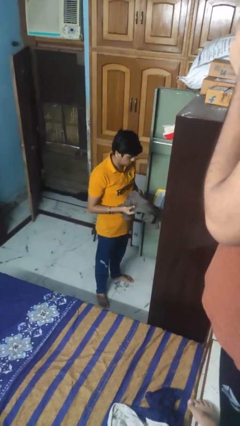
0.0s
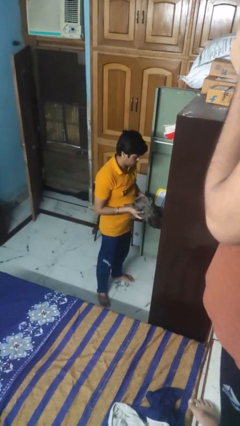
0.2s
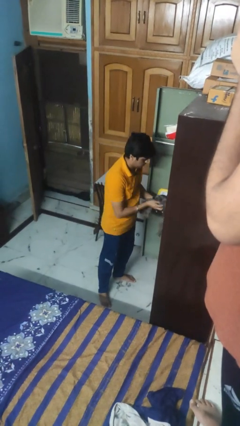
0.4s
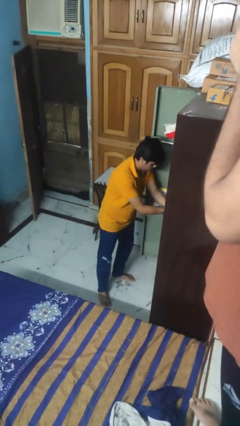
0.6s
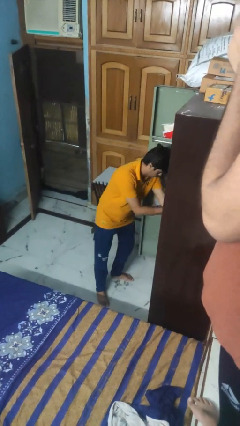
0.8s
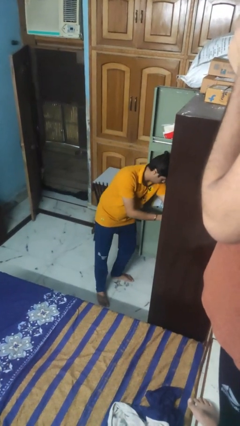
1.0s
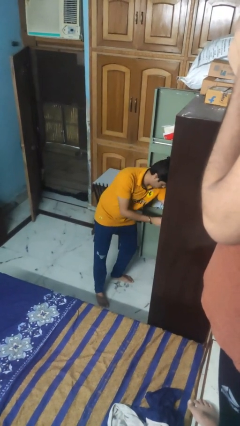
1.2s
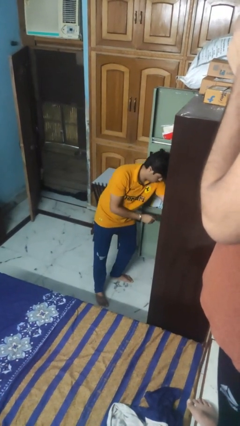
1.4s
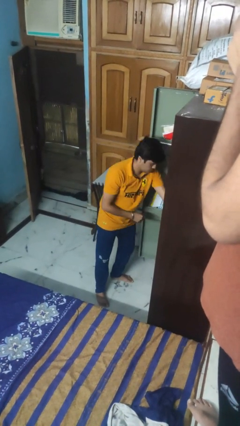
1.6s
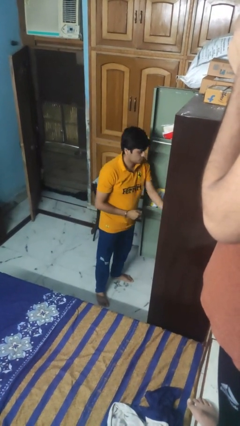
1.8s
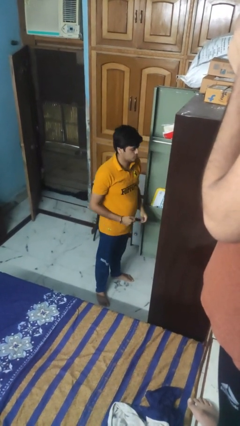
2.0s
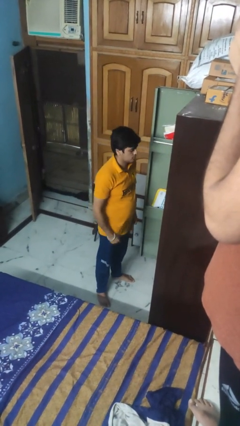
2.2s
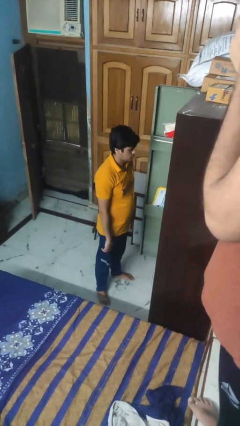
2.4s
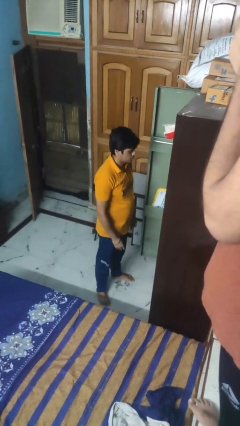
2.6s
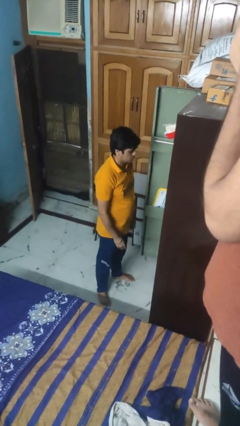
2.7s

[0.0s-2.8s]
person puts clothes into dresser

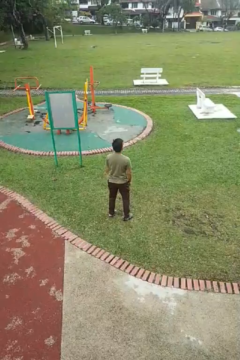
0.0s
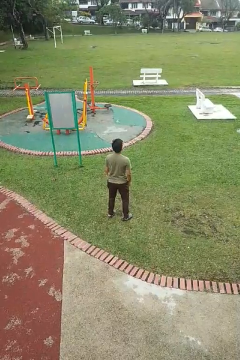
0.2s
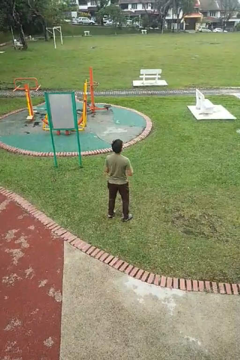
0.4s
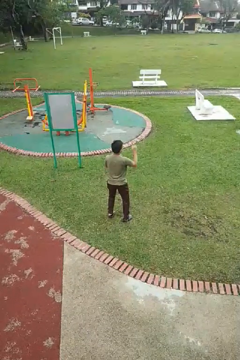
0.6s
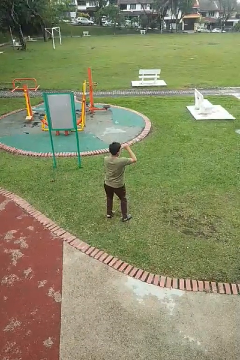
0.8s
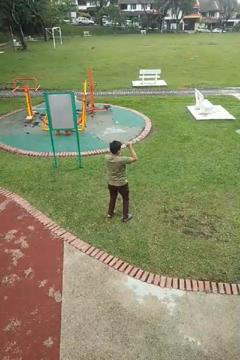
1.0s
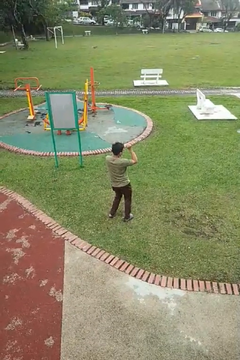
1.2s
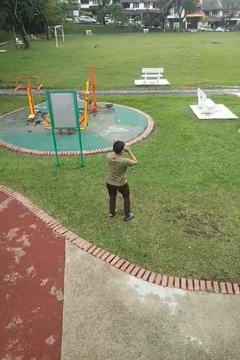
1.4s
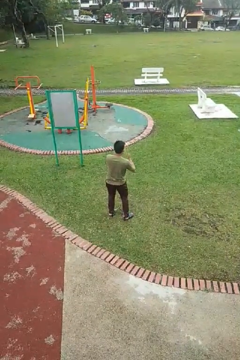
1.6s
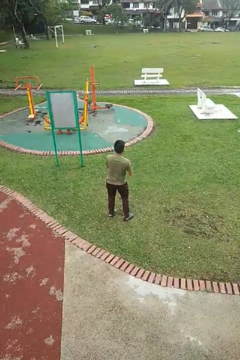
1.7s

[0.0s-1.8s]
person dances in place

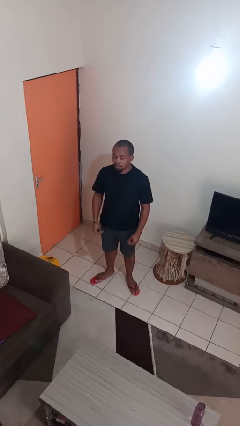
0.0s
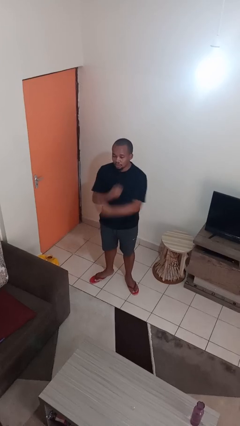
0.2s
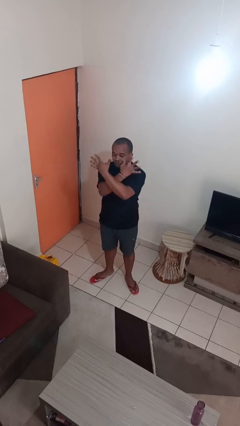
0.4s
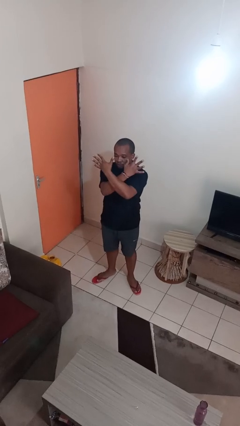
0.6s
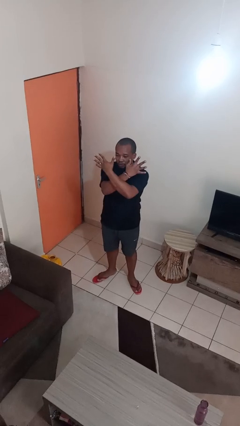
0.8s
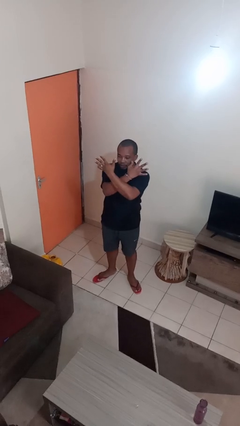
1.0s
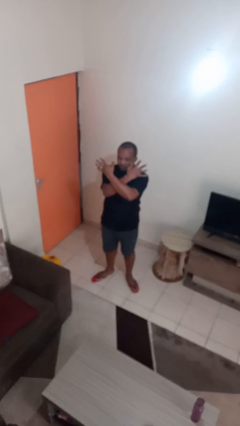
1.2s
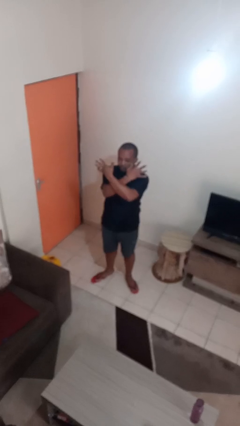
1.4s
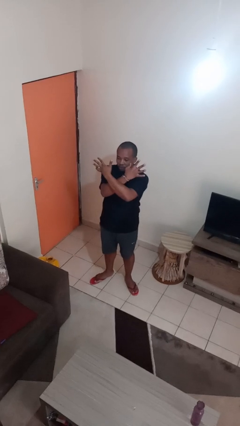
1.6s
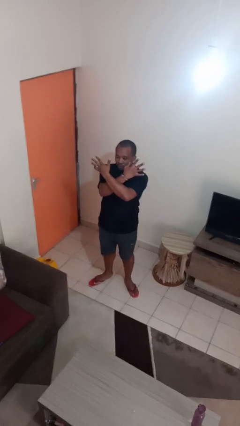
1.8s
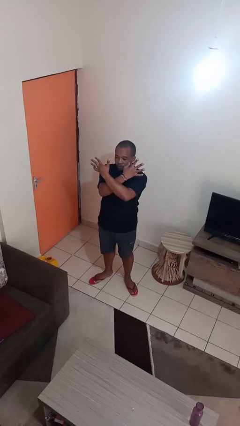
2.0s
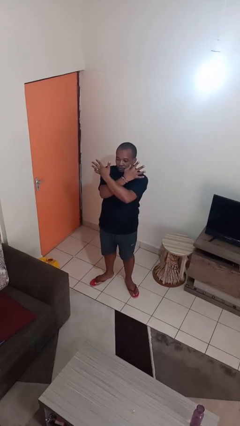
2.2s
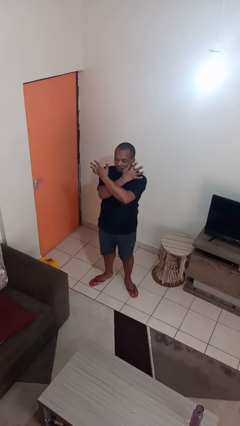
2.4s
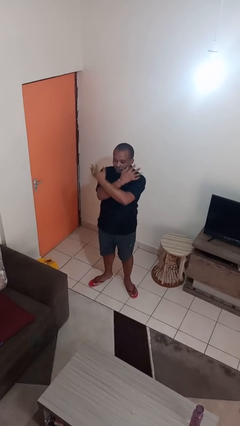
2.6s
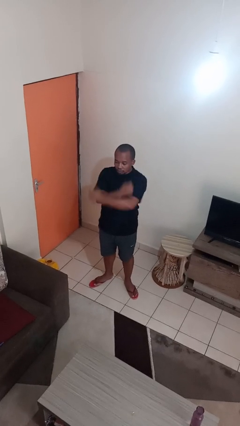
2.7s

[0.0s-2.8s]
person gestures arms x

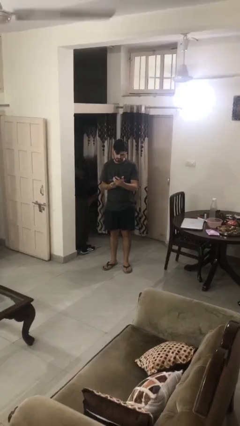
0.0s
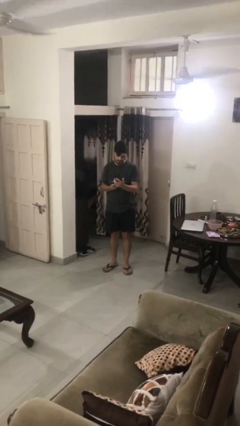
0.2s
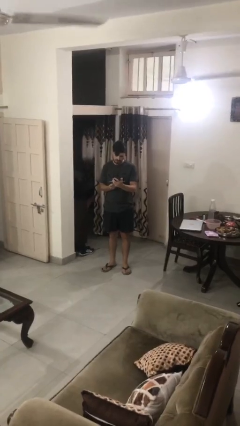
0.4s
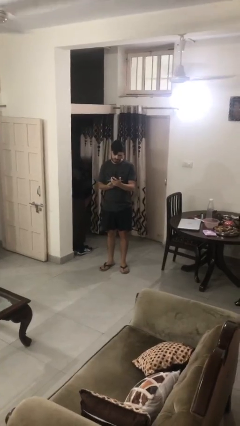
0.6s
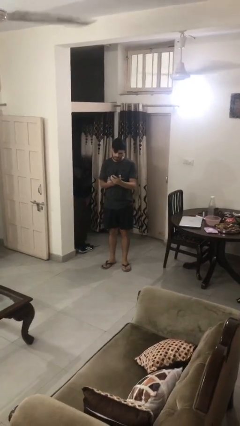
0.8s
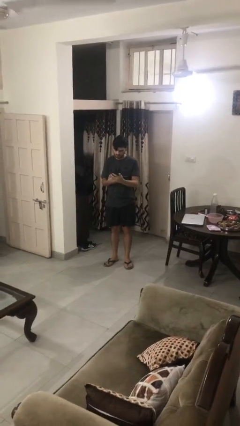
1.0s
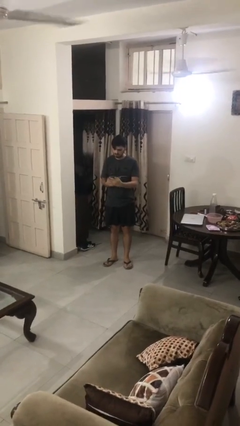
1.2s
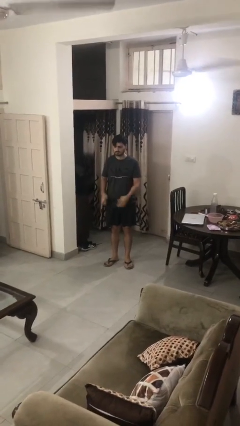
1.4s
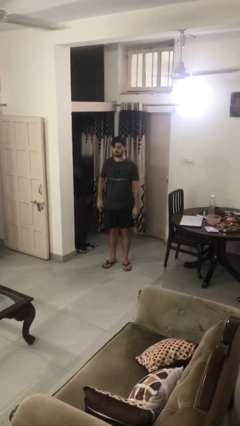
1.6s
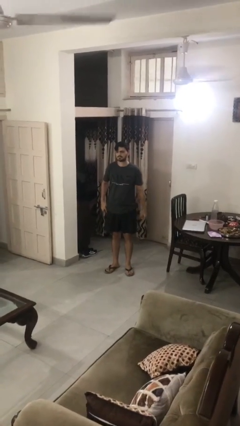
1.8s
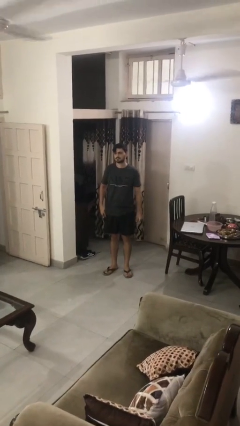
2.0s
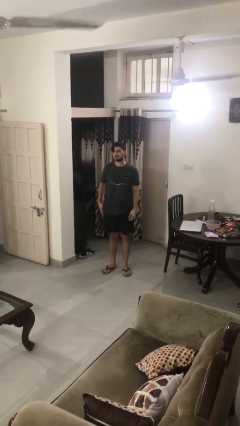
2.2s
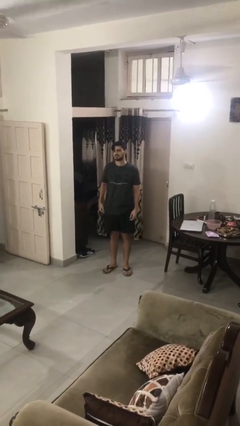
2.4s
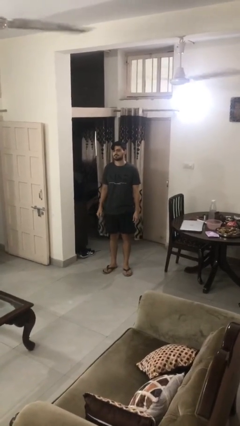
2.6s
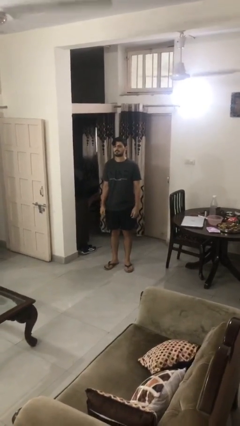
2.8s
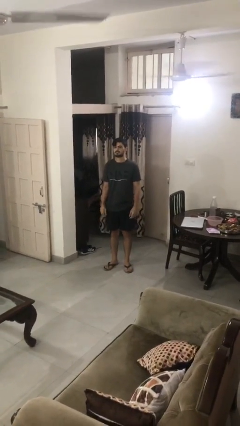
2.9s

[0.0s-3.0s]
person puts phone into pocket

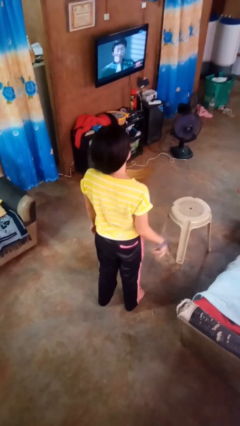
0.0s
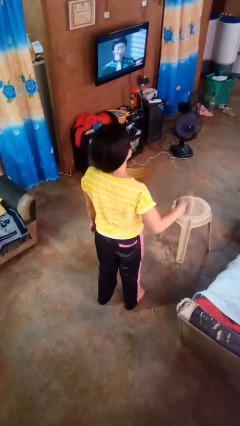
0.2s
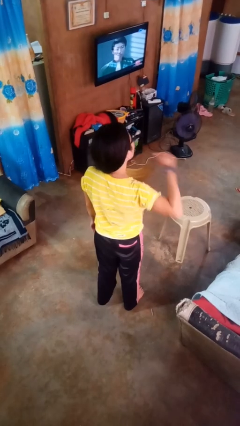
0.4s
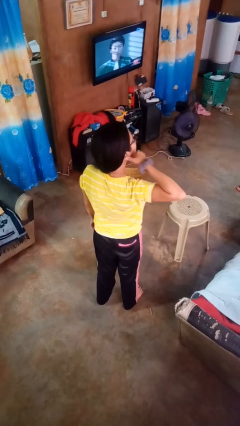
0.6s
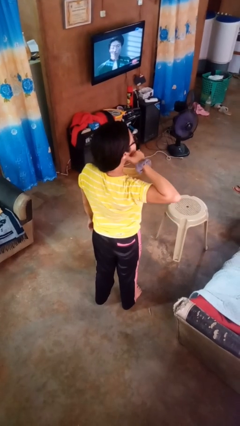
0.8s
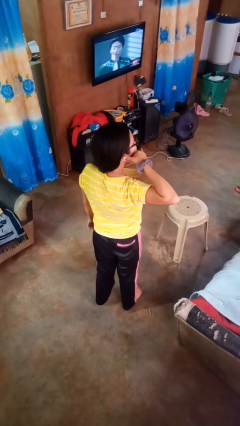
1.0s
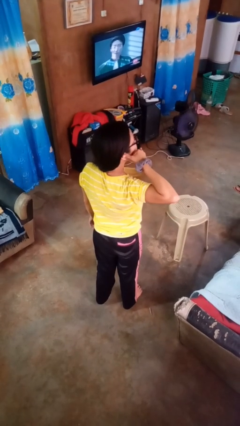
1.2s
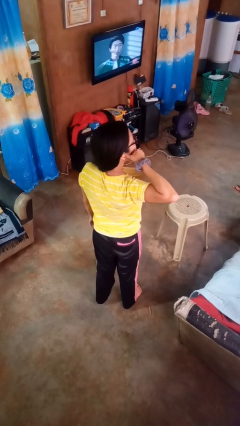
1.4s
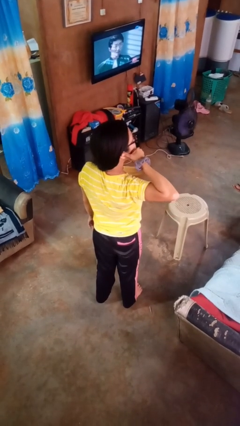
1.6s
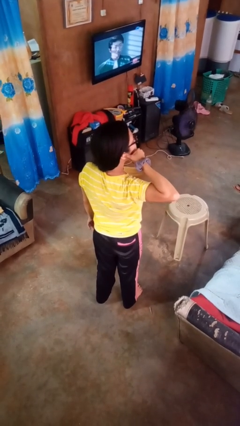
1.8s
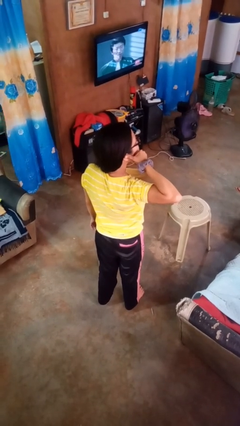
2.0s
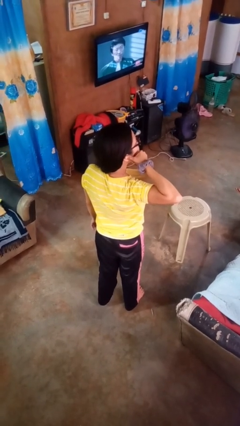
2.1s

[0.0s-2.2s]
person gestures call me

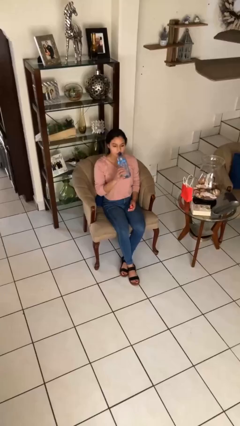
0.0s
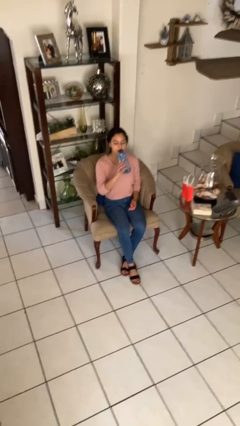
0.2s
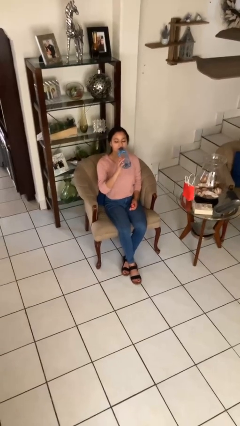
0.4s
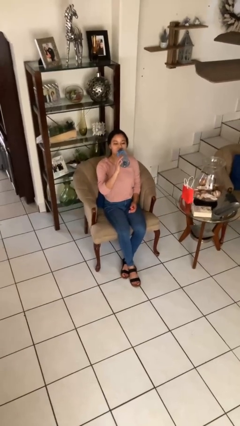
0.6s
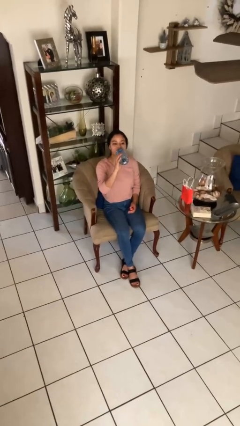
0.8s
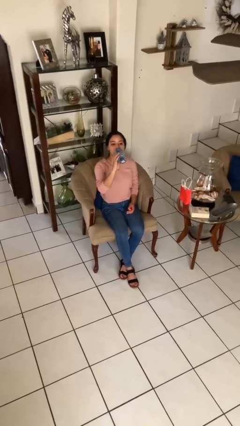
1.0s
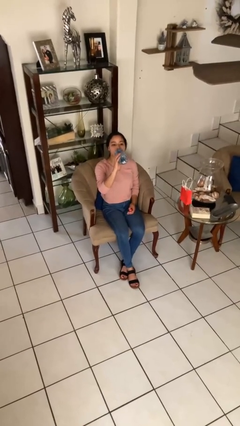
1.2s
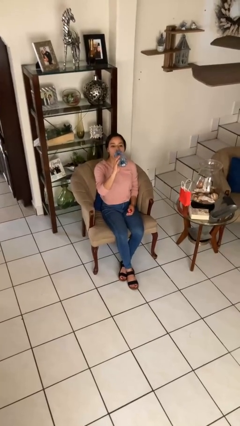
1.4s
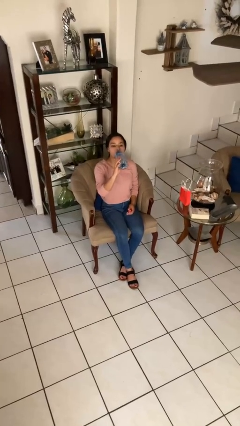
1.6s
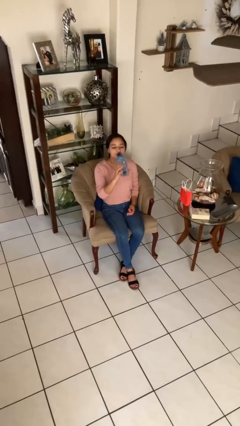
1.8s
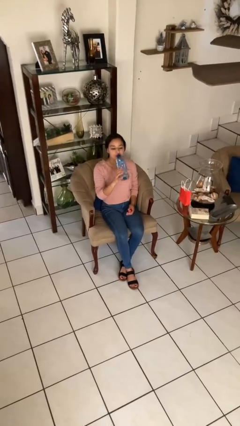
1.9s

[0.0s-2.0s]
person drinks from bottle

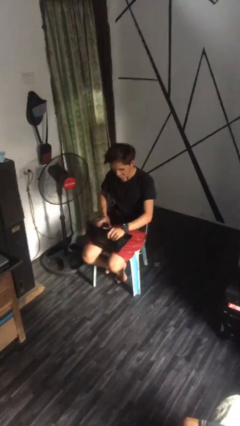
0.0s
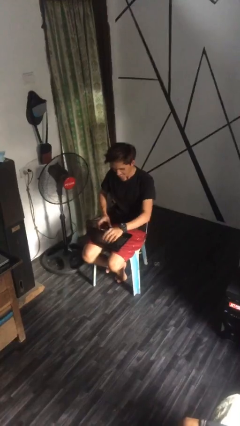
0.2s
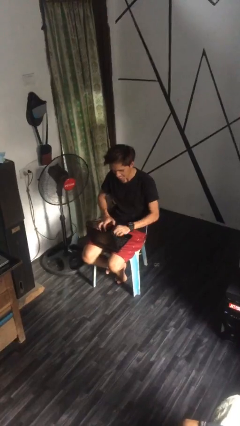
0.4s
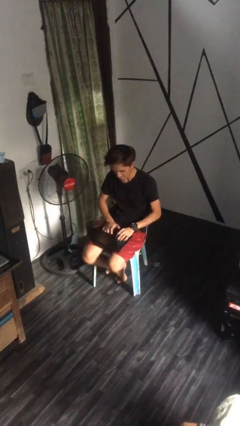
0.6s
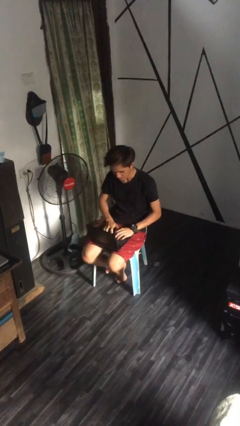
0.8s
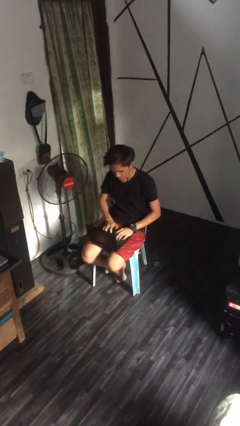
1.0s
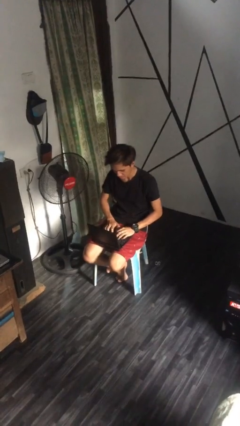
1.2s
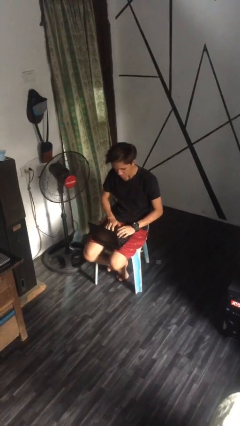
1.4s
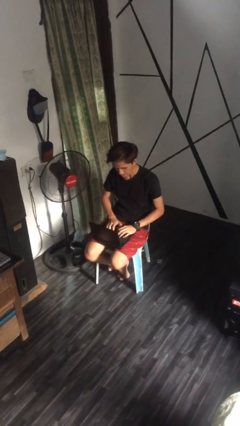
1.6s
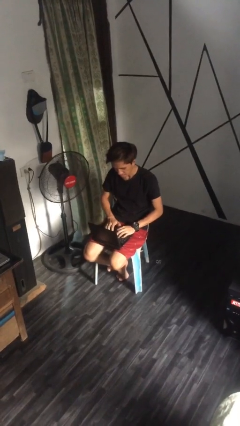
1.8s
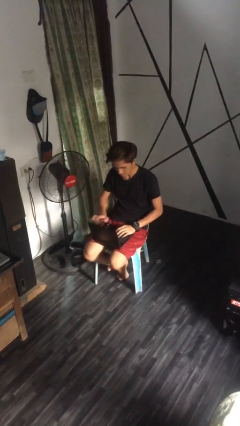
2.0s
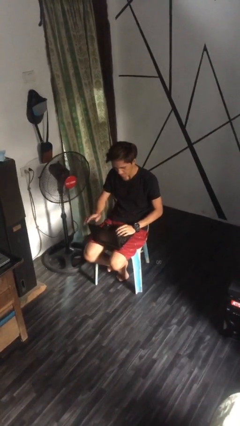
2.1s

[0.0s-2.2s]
person interacts with laptop

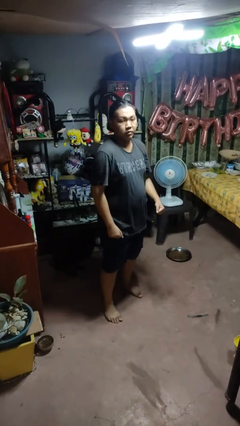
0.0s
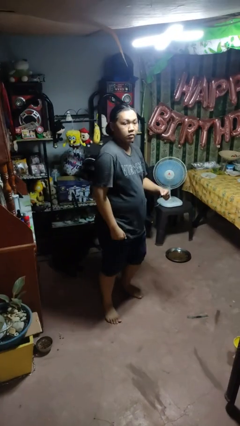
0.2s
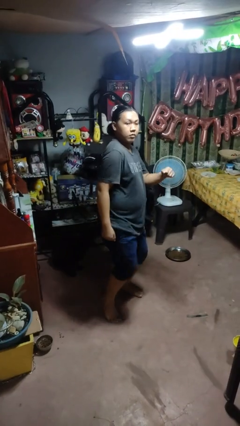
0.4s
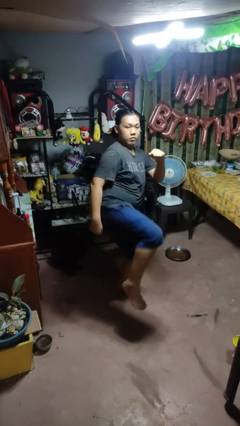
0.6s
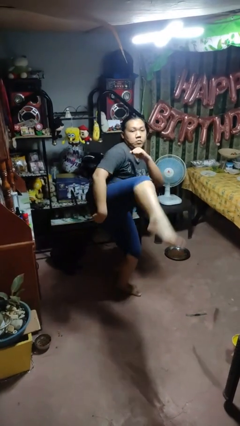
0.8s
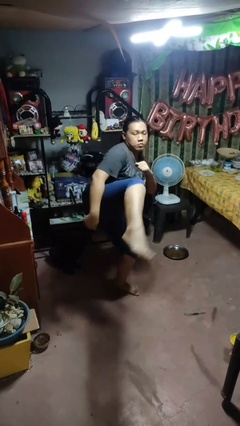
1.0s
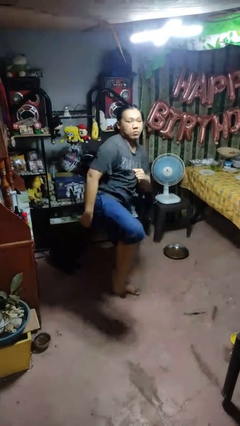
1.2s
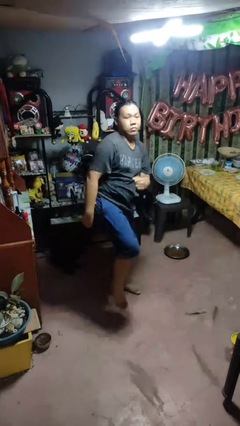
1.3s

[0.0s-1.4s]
person karate kicks
